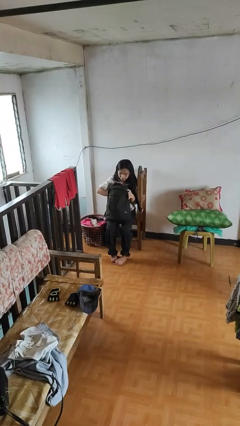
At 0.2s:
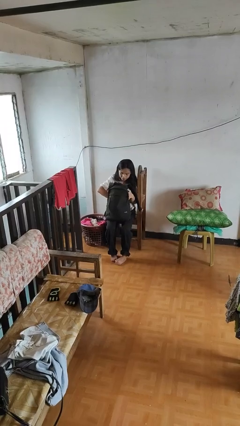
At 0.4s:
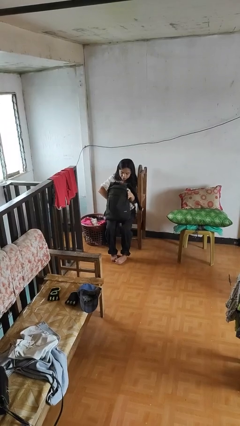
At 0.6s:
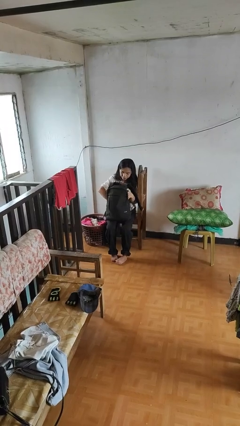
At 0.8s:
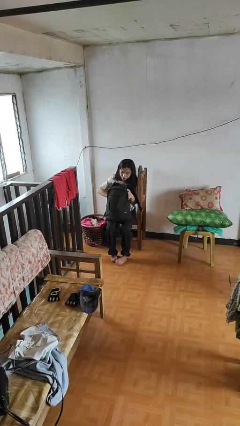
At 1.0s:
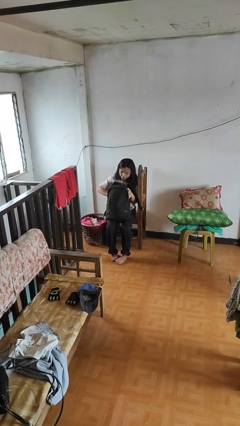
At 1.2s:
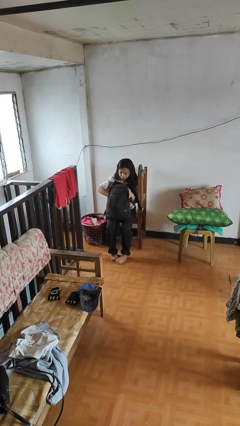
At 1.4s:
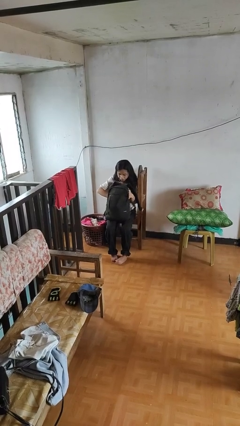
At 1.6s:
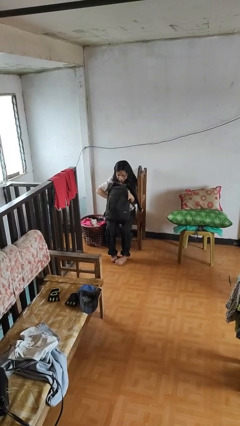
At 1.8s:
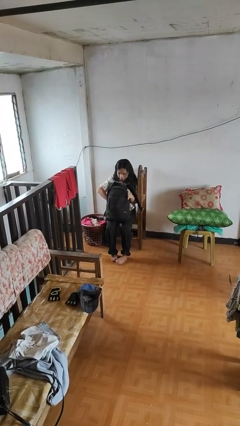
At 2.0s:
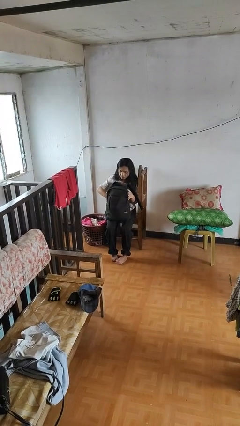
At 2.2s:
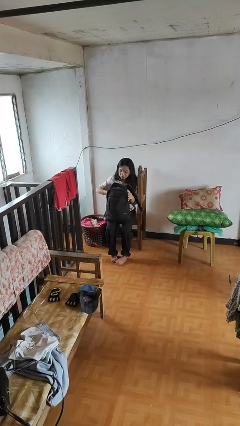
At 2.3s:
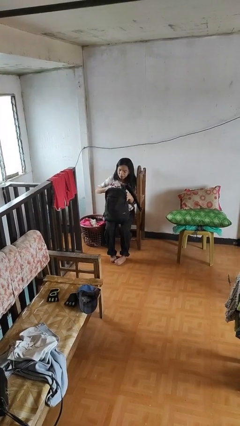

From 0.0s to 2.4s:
person searches in backpack

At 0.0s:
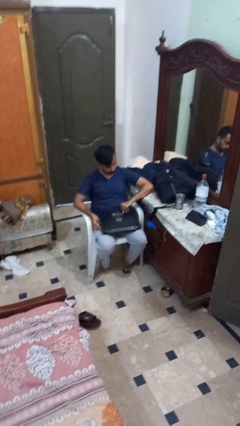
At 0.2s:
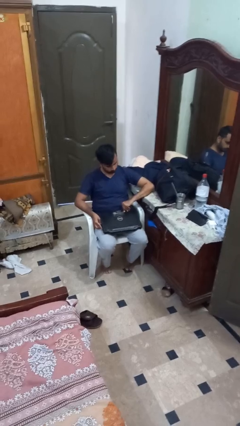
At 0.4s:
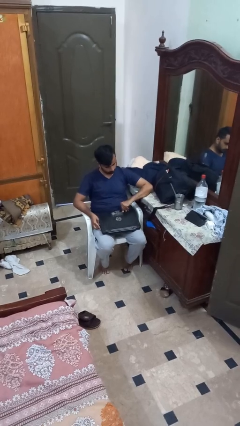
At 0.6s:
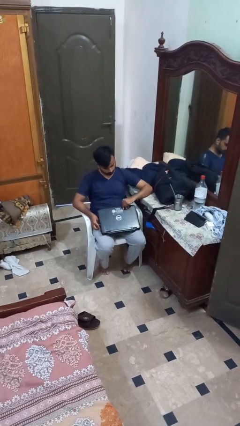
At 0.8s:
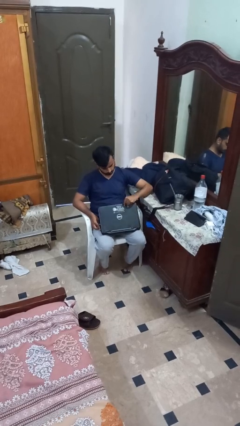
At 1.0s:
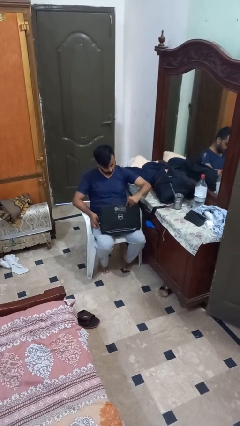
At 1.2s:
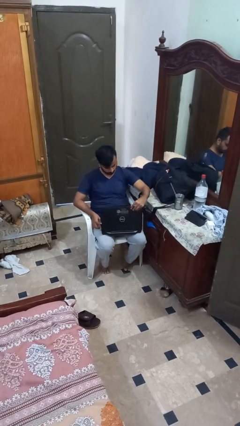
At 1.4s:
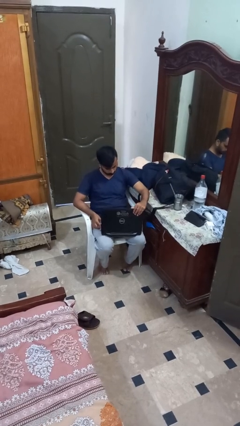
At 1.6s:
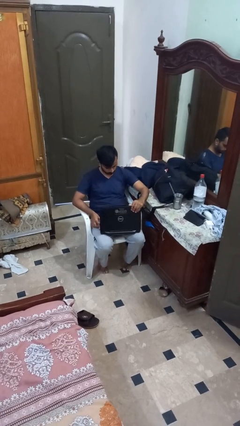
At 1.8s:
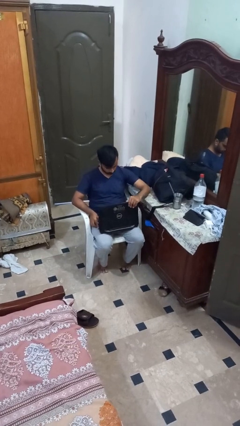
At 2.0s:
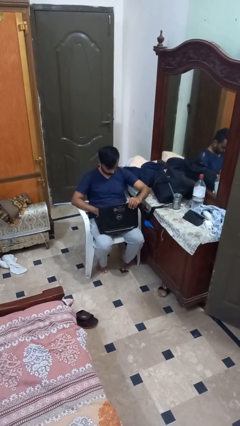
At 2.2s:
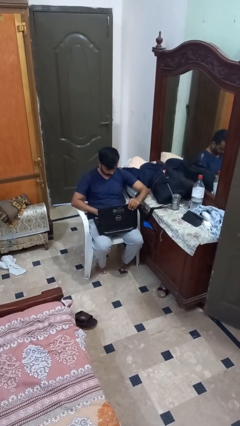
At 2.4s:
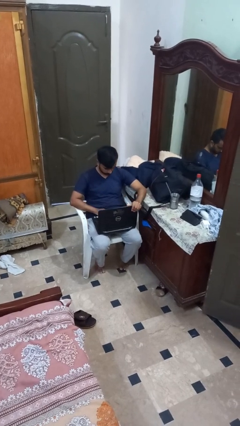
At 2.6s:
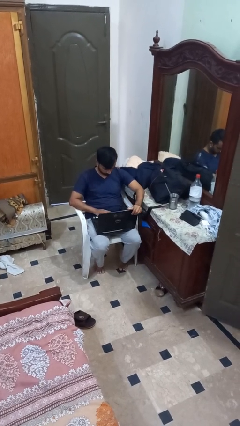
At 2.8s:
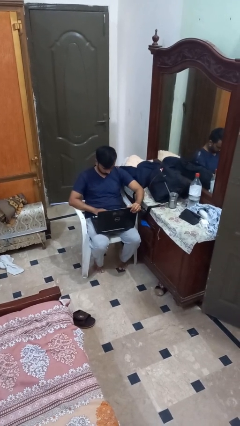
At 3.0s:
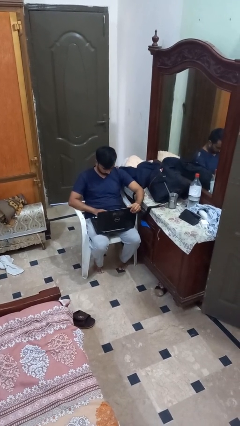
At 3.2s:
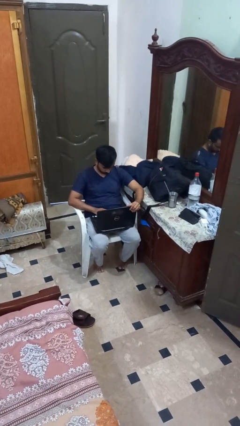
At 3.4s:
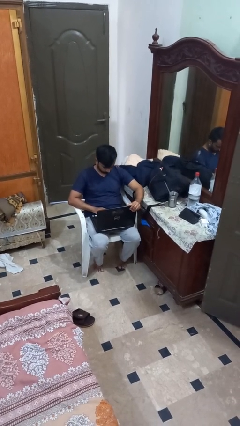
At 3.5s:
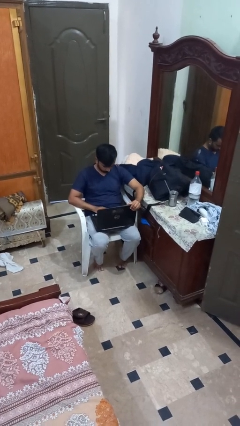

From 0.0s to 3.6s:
person opens laptop

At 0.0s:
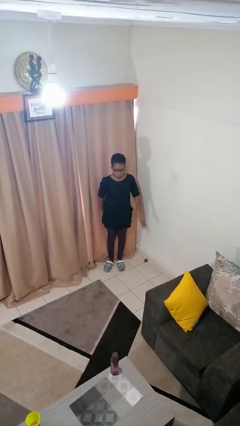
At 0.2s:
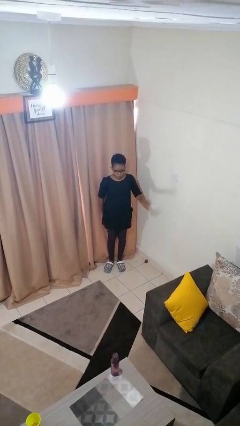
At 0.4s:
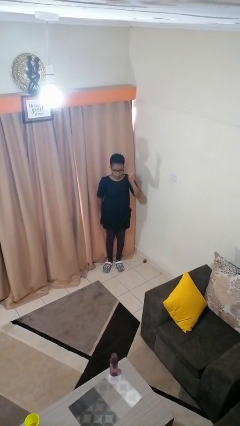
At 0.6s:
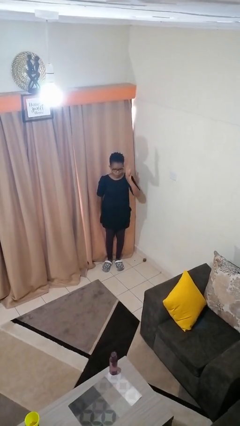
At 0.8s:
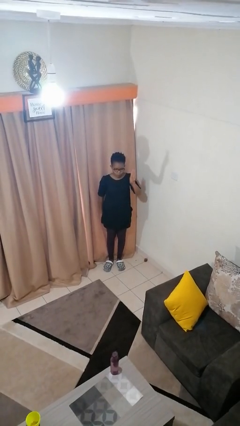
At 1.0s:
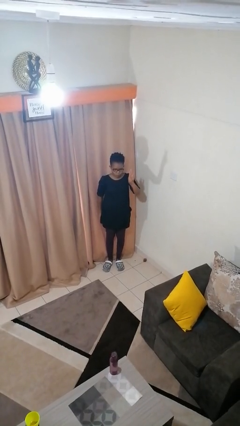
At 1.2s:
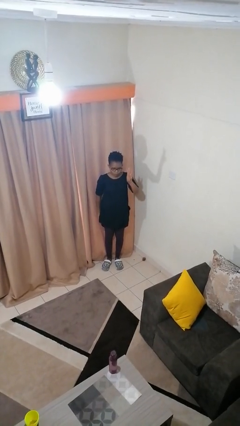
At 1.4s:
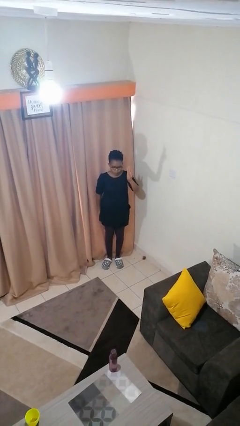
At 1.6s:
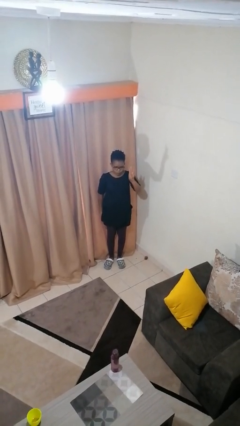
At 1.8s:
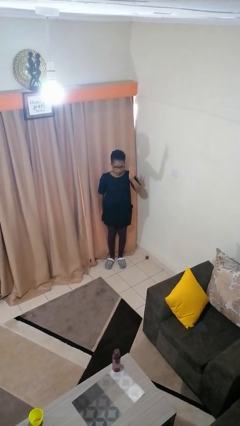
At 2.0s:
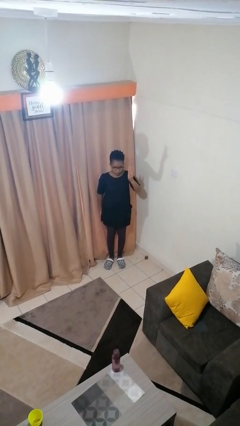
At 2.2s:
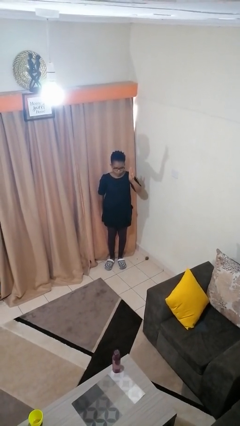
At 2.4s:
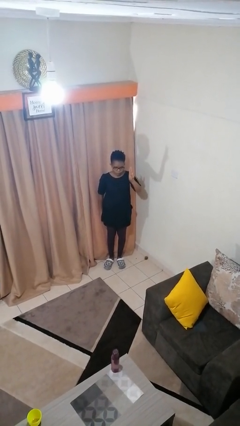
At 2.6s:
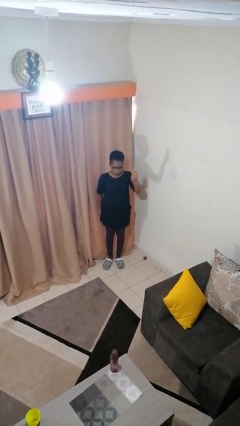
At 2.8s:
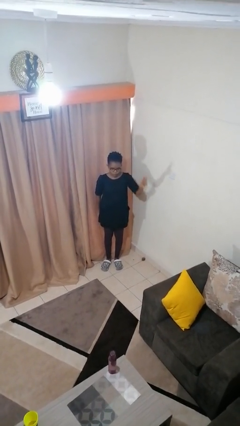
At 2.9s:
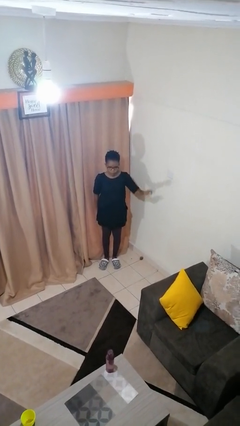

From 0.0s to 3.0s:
person gestures number three

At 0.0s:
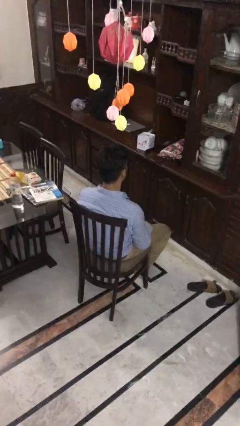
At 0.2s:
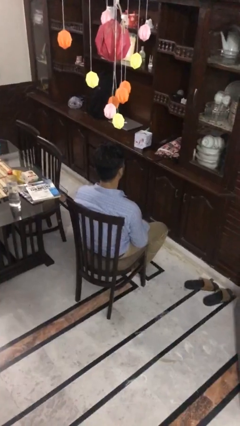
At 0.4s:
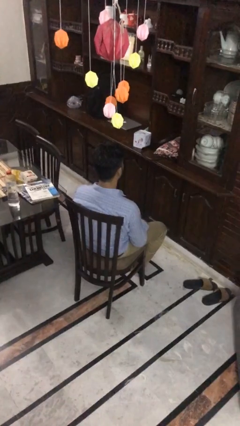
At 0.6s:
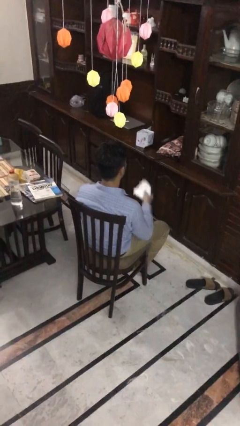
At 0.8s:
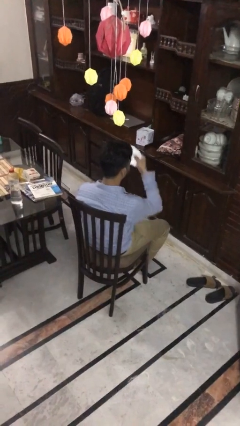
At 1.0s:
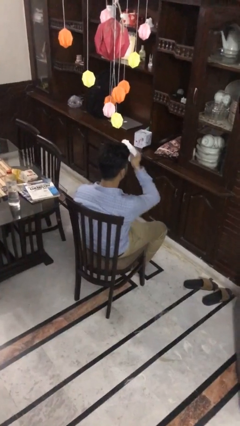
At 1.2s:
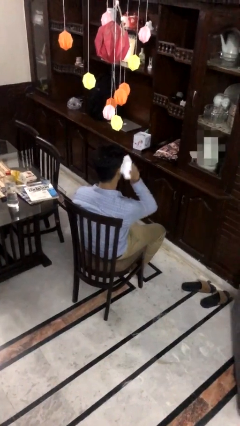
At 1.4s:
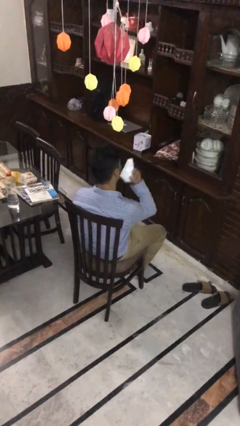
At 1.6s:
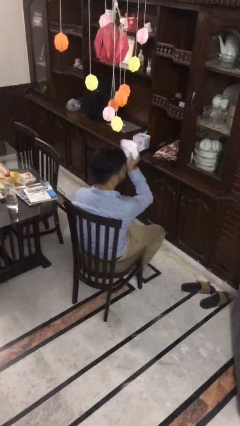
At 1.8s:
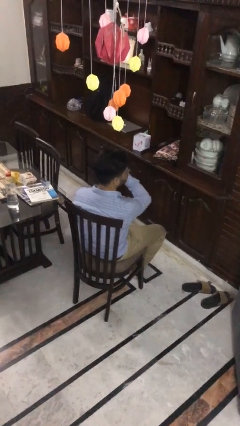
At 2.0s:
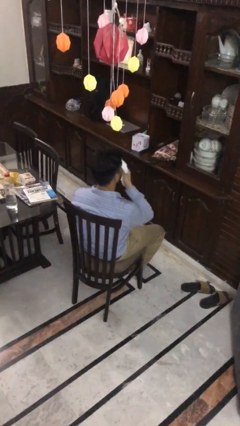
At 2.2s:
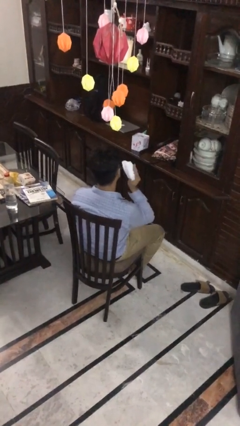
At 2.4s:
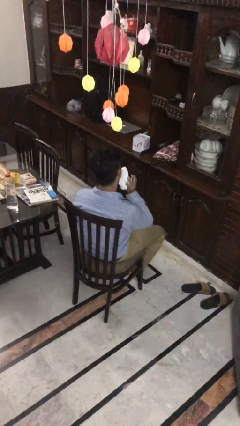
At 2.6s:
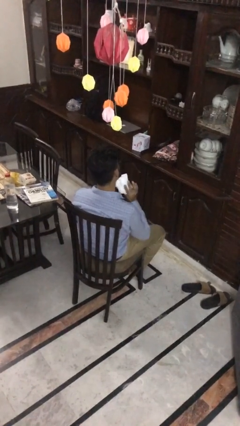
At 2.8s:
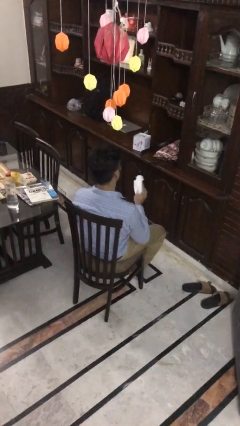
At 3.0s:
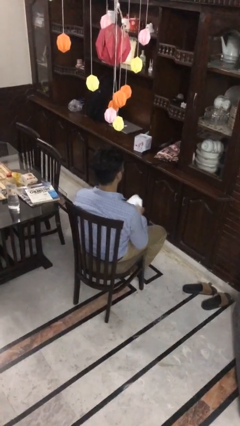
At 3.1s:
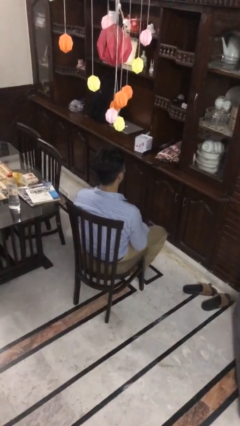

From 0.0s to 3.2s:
person wipes mouth with napkin

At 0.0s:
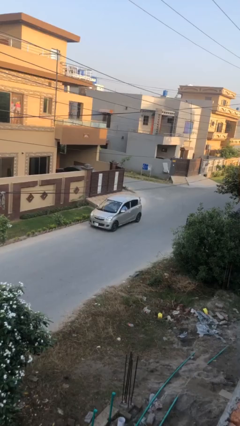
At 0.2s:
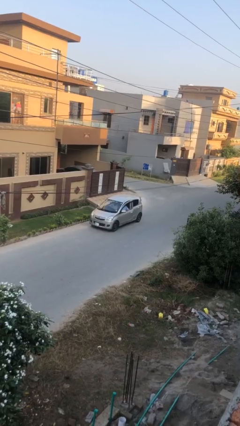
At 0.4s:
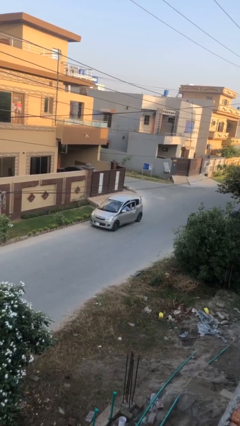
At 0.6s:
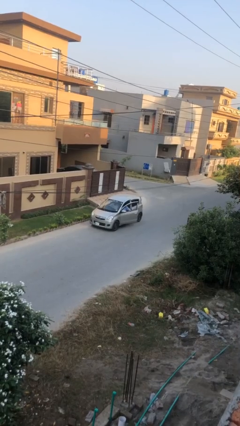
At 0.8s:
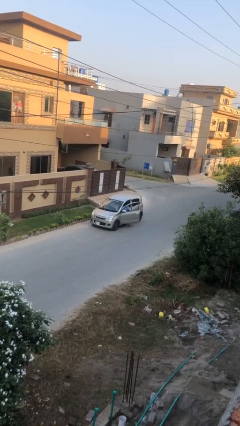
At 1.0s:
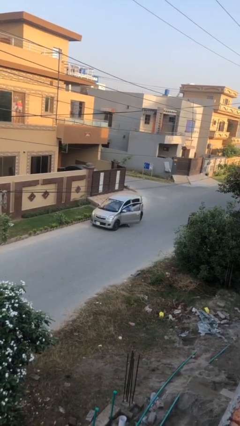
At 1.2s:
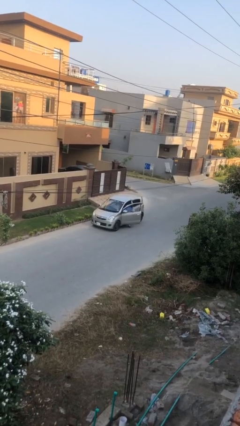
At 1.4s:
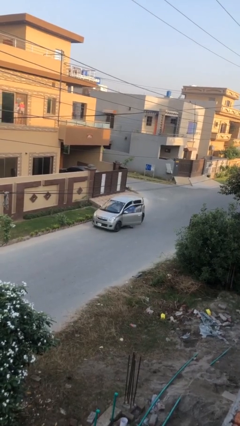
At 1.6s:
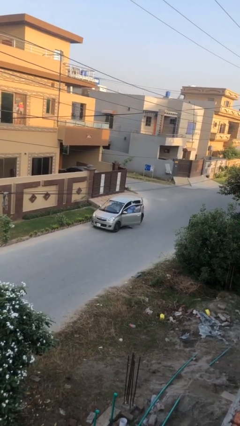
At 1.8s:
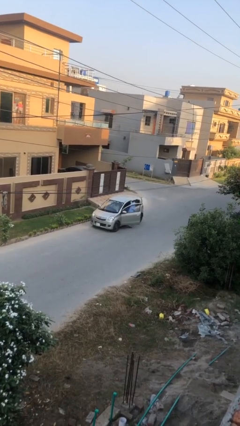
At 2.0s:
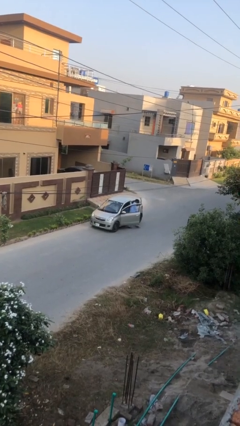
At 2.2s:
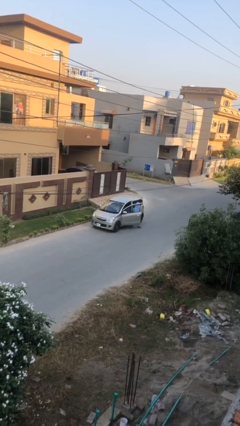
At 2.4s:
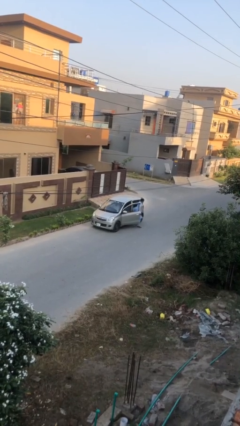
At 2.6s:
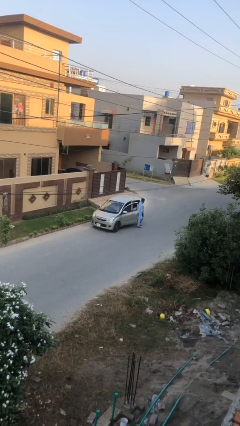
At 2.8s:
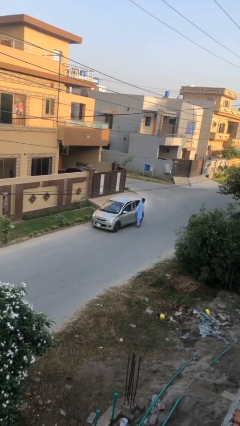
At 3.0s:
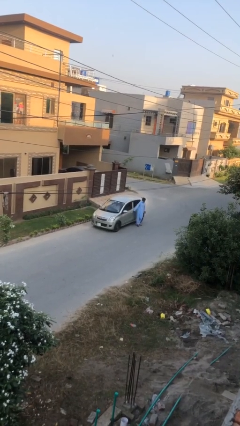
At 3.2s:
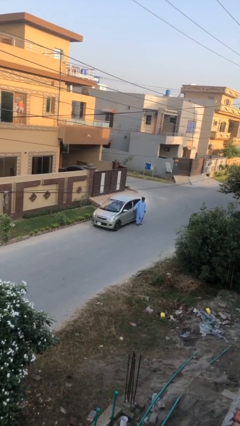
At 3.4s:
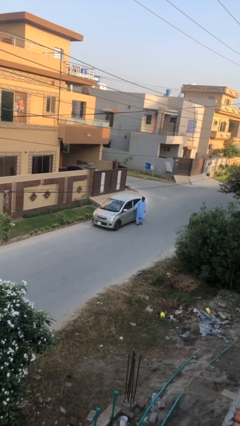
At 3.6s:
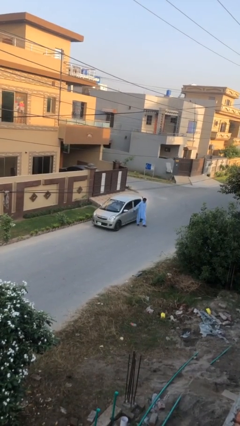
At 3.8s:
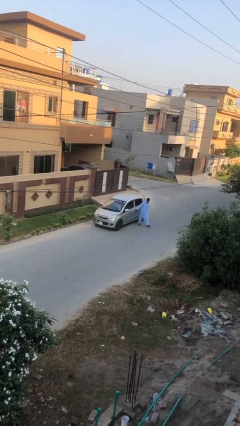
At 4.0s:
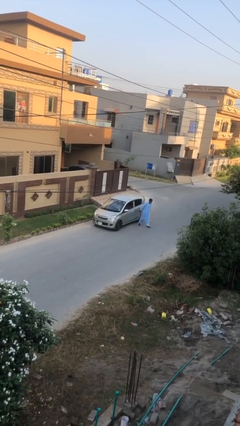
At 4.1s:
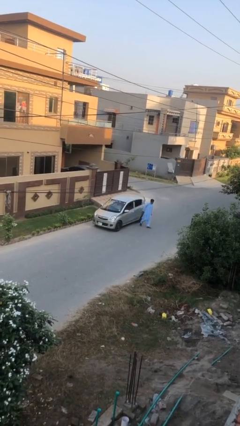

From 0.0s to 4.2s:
car drops off person

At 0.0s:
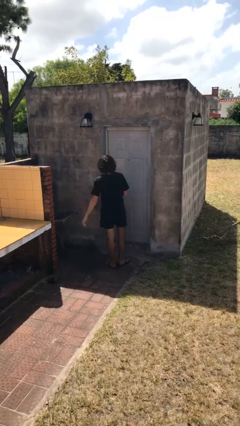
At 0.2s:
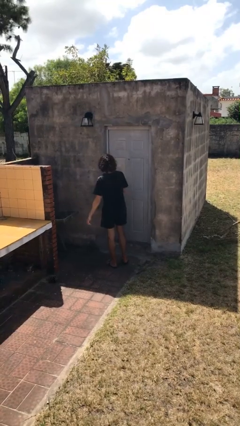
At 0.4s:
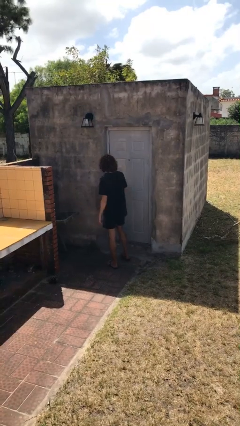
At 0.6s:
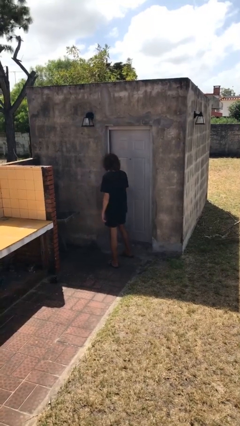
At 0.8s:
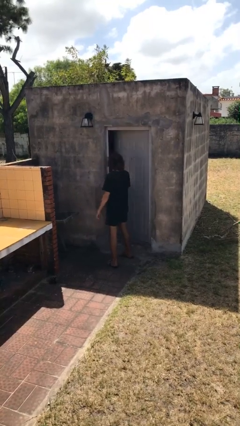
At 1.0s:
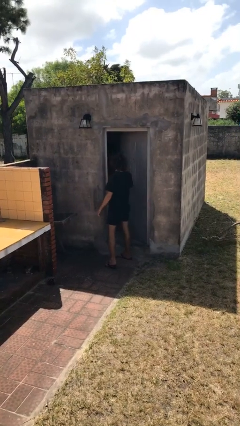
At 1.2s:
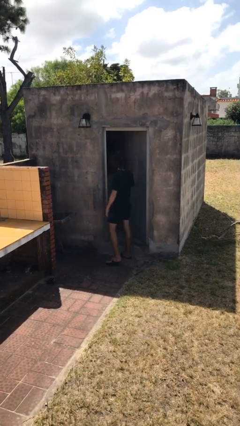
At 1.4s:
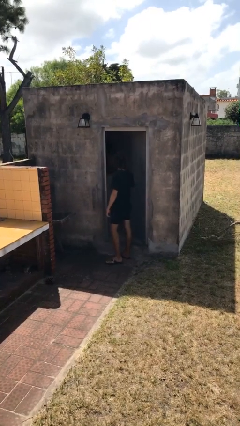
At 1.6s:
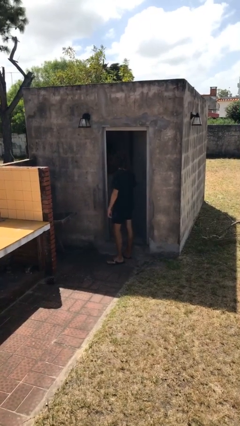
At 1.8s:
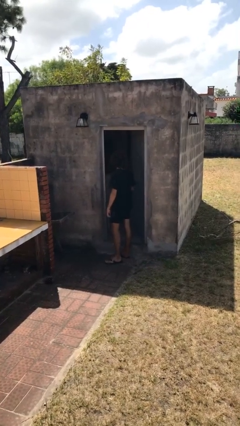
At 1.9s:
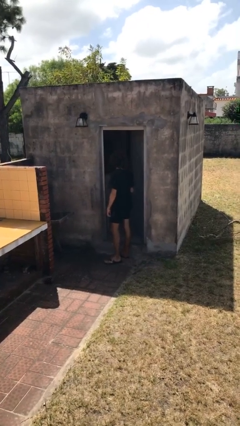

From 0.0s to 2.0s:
person opens facility door
